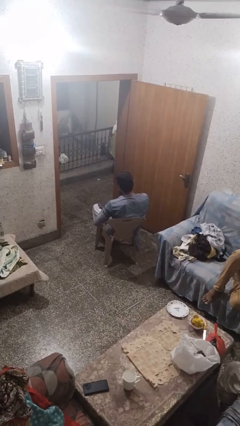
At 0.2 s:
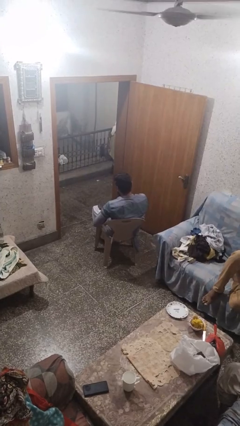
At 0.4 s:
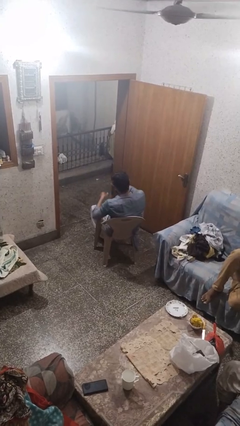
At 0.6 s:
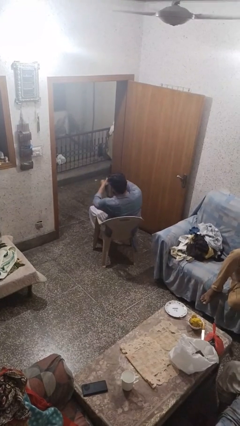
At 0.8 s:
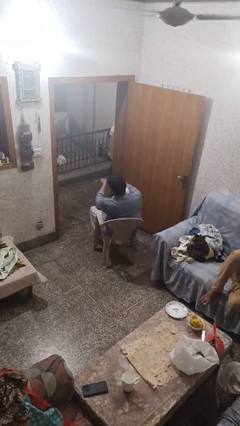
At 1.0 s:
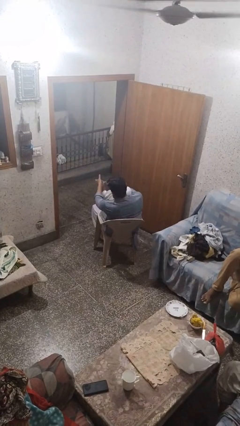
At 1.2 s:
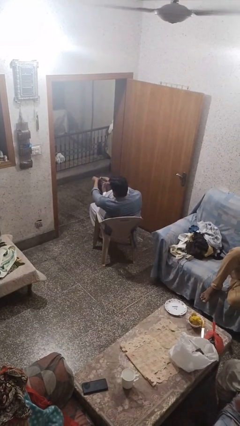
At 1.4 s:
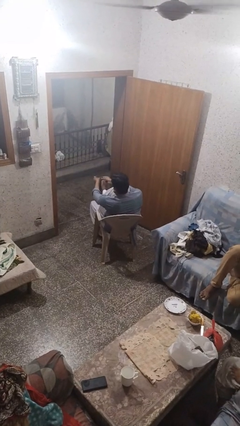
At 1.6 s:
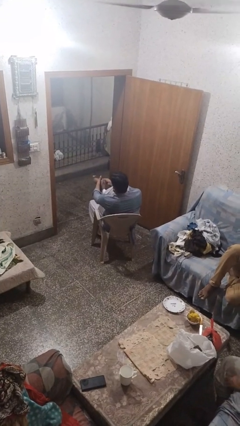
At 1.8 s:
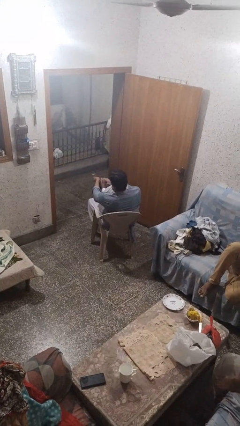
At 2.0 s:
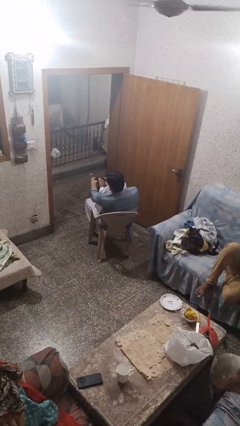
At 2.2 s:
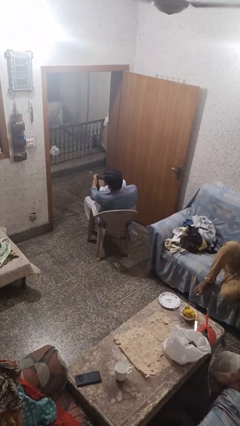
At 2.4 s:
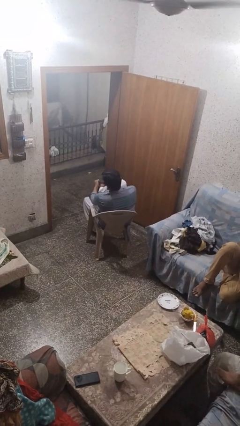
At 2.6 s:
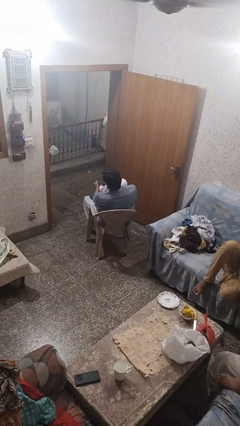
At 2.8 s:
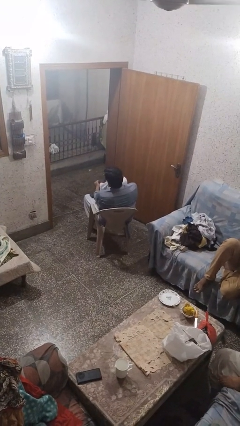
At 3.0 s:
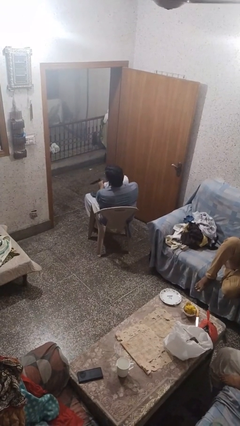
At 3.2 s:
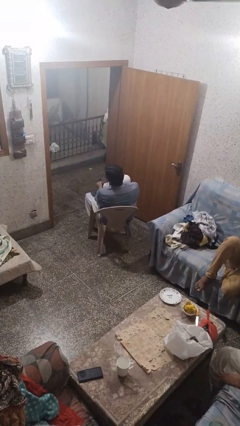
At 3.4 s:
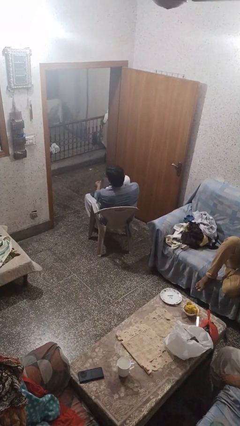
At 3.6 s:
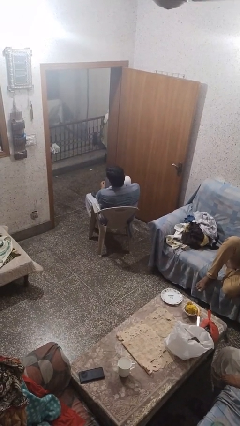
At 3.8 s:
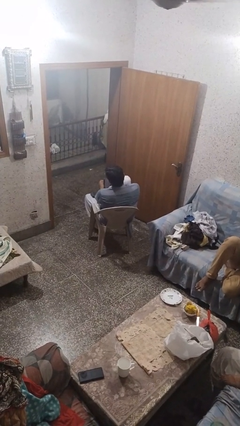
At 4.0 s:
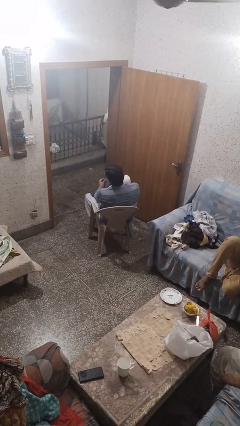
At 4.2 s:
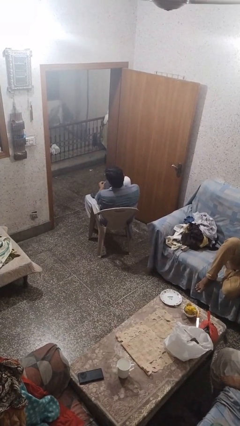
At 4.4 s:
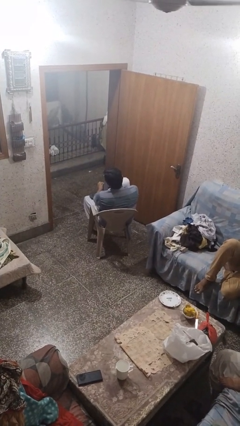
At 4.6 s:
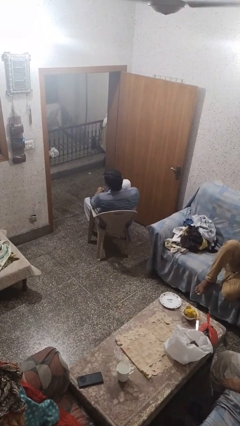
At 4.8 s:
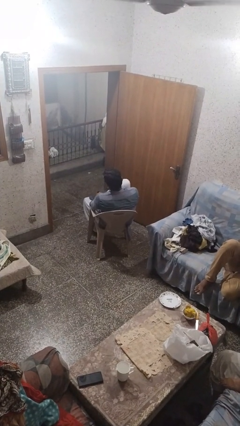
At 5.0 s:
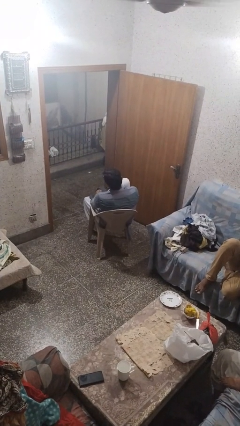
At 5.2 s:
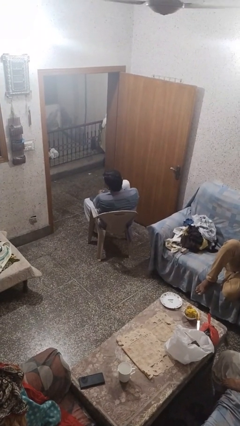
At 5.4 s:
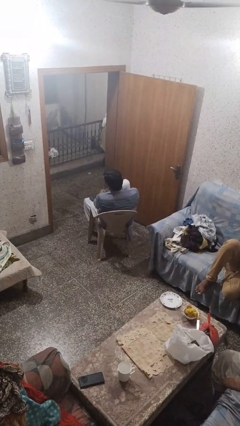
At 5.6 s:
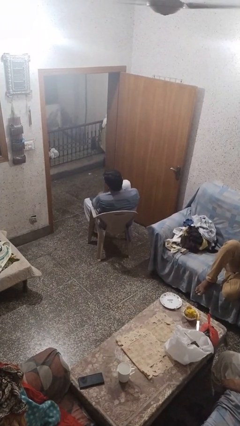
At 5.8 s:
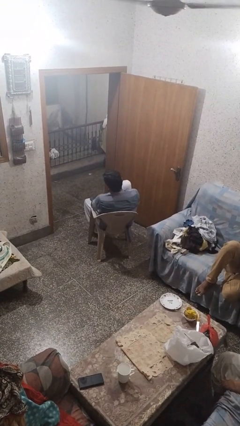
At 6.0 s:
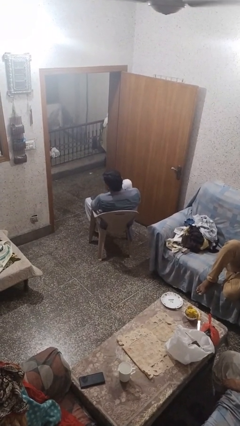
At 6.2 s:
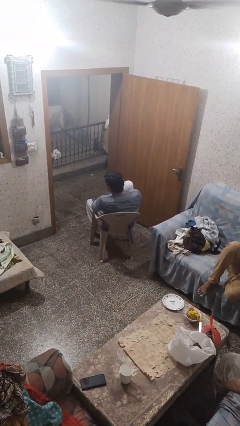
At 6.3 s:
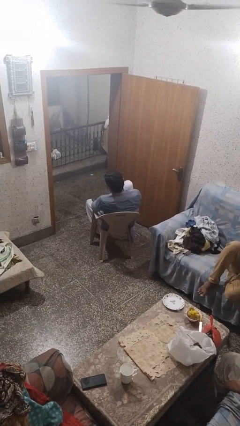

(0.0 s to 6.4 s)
person puts on socks

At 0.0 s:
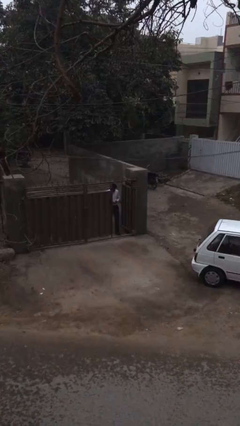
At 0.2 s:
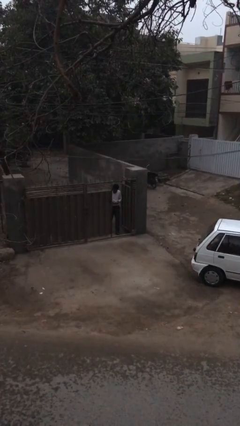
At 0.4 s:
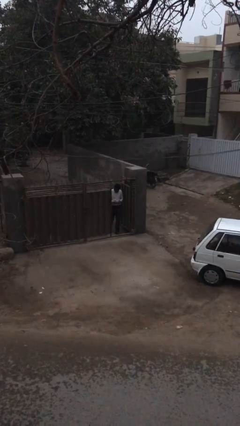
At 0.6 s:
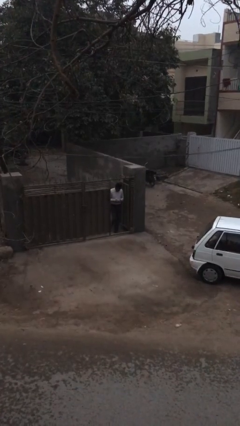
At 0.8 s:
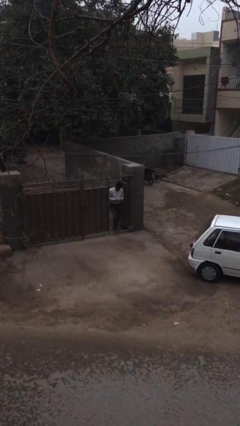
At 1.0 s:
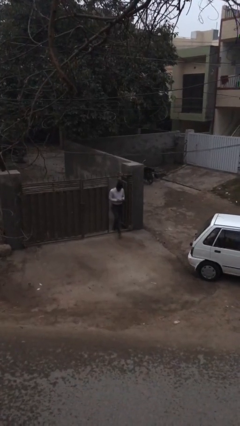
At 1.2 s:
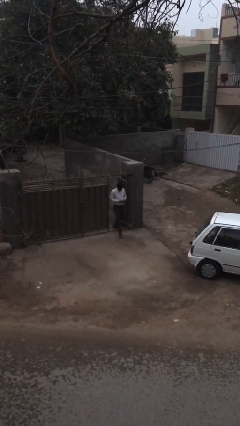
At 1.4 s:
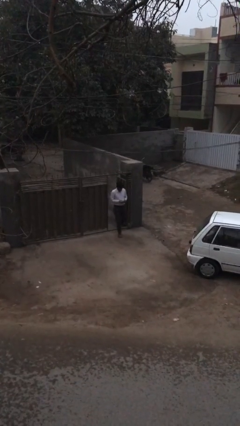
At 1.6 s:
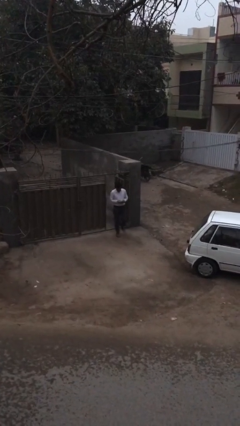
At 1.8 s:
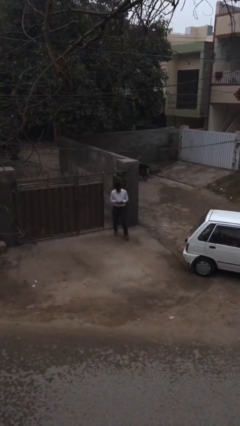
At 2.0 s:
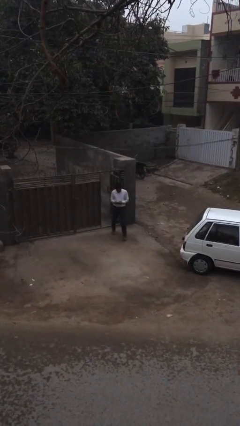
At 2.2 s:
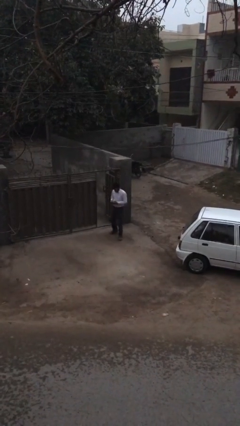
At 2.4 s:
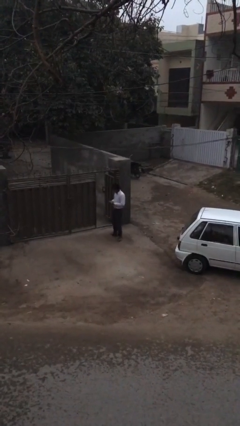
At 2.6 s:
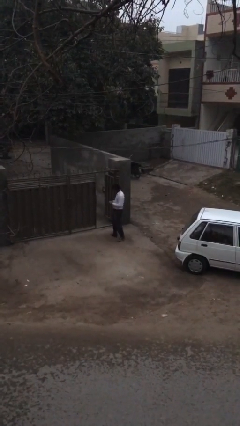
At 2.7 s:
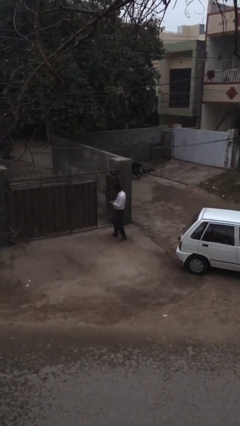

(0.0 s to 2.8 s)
person enters scene through structure

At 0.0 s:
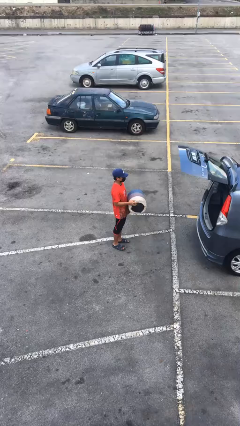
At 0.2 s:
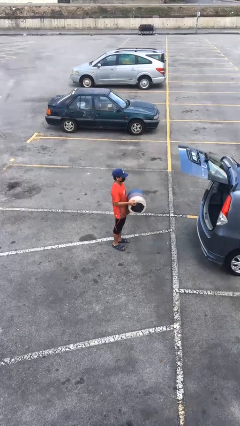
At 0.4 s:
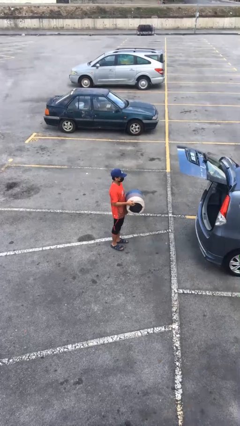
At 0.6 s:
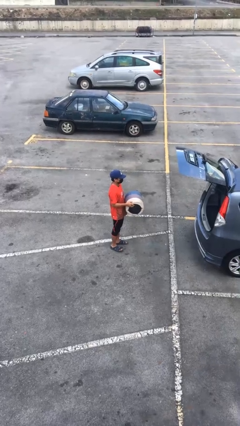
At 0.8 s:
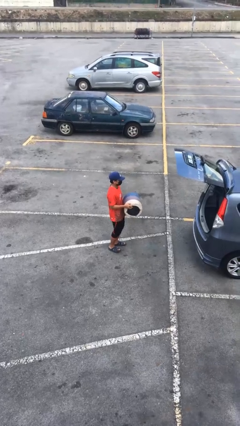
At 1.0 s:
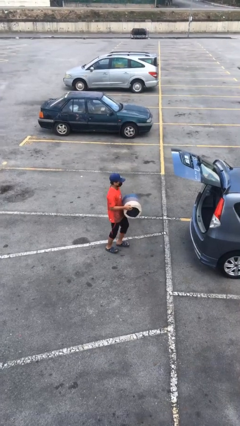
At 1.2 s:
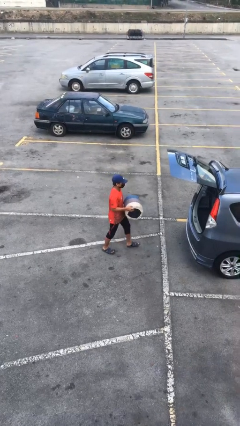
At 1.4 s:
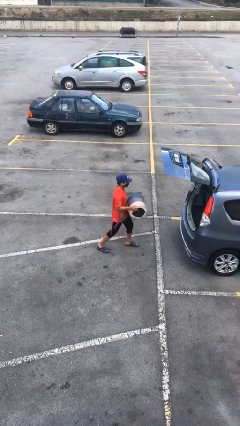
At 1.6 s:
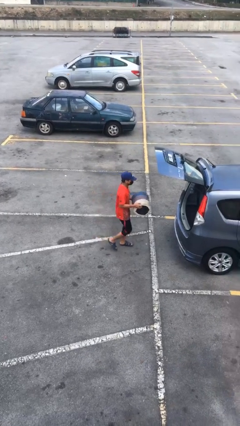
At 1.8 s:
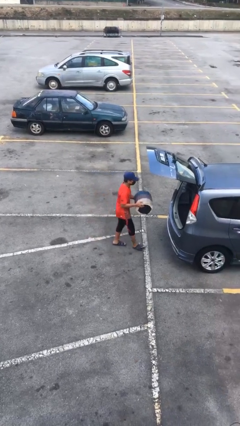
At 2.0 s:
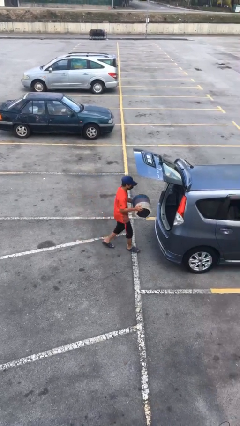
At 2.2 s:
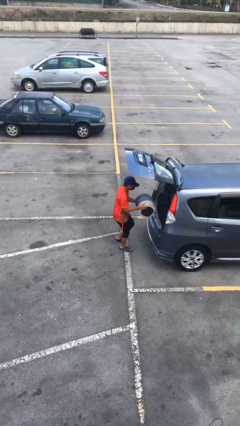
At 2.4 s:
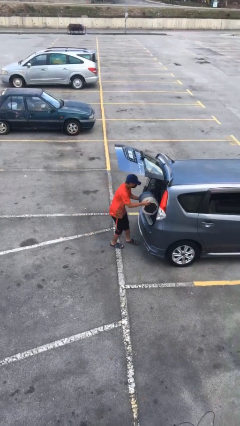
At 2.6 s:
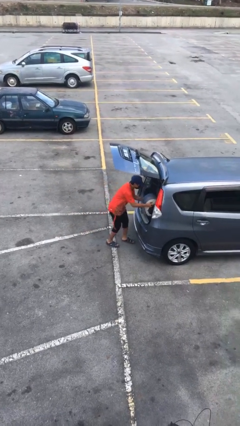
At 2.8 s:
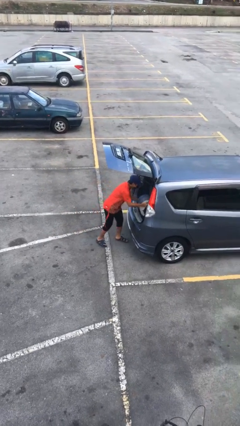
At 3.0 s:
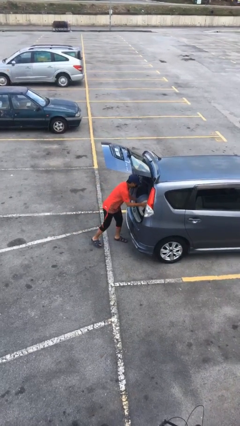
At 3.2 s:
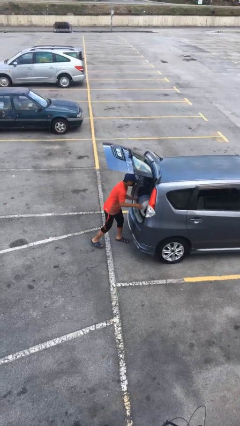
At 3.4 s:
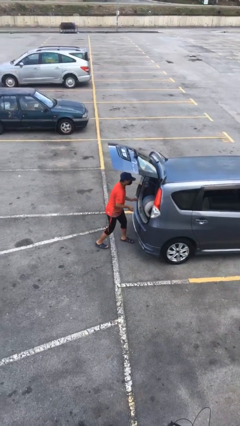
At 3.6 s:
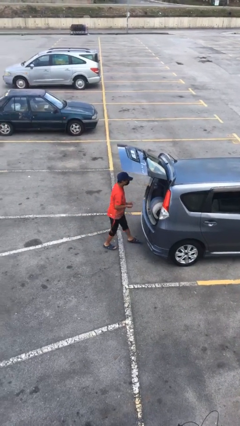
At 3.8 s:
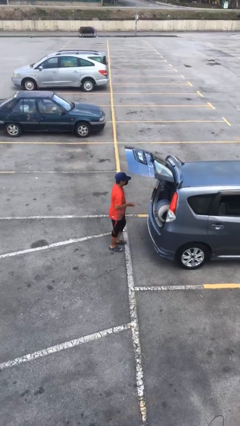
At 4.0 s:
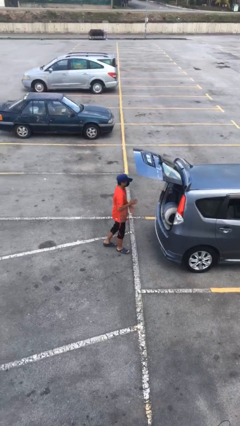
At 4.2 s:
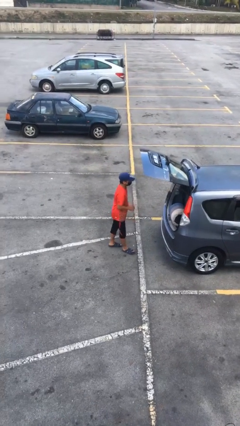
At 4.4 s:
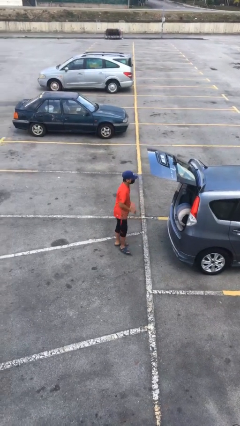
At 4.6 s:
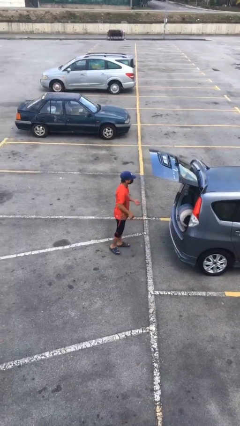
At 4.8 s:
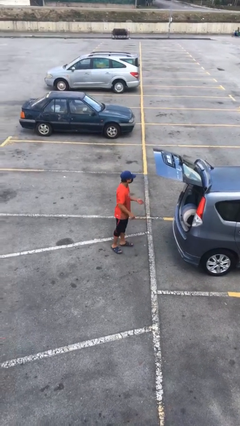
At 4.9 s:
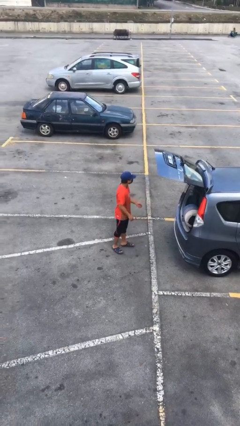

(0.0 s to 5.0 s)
person loads car

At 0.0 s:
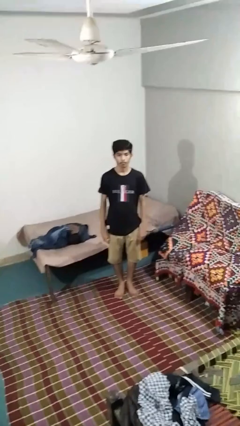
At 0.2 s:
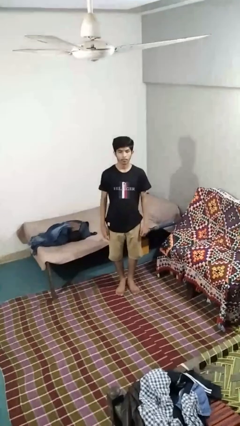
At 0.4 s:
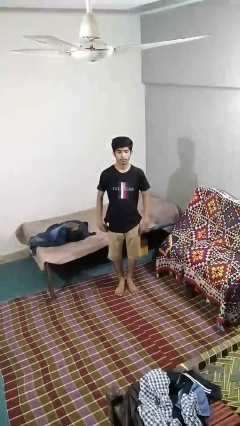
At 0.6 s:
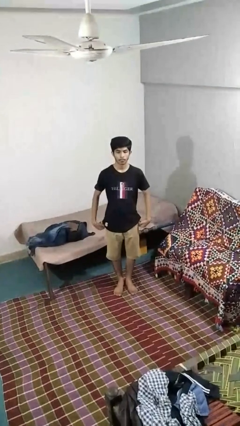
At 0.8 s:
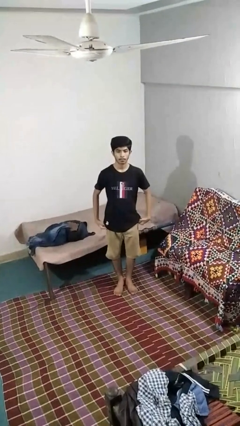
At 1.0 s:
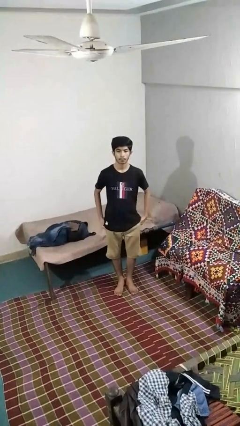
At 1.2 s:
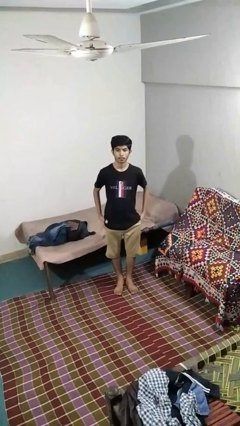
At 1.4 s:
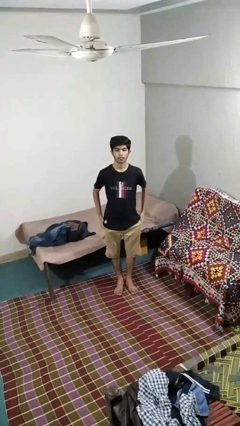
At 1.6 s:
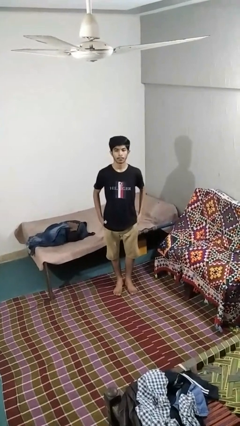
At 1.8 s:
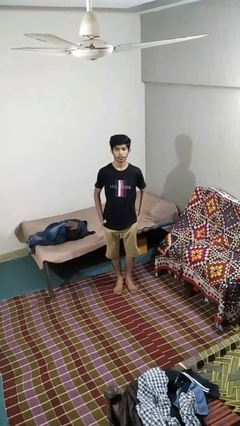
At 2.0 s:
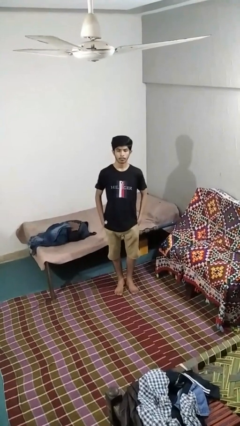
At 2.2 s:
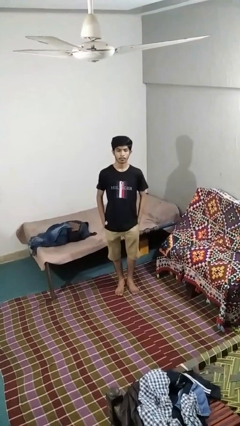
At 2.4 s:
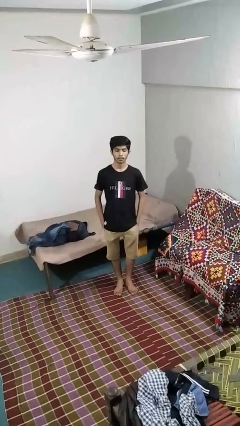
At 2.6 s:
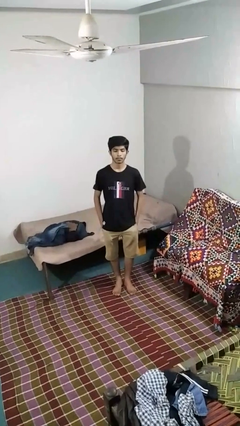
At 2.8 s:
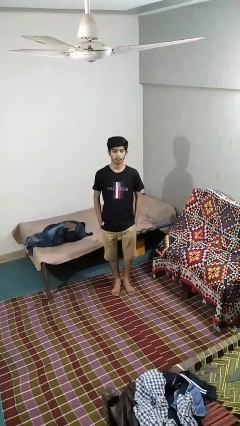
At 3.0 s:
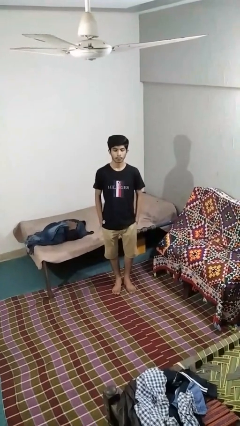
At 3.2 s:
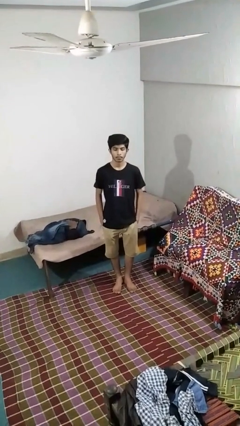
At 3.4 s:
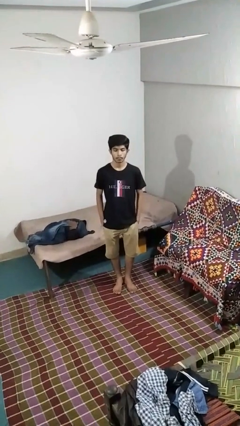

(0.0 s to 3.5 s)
person puts hands in back pockets
